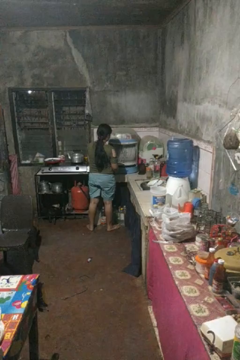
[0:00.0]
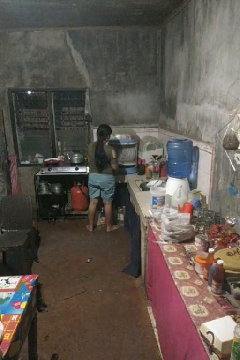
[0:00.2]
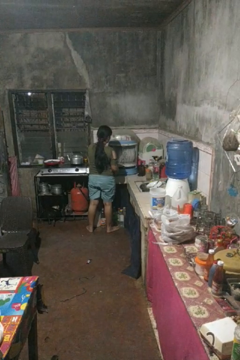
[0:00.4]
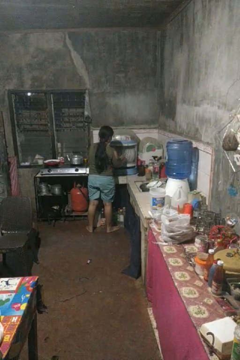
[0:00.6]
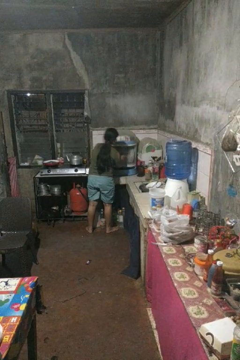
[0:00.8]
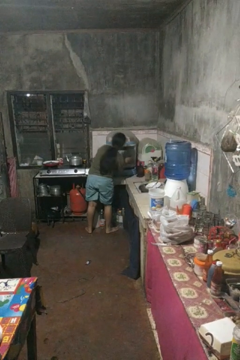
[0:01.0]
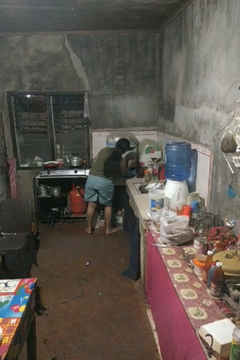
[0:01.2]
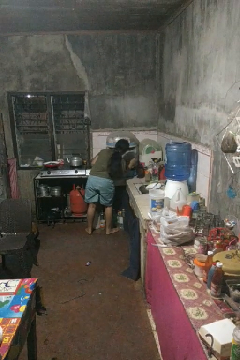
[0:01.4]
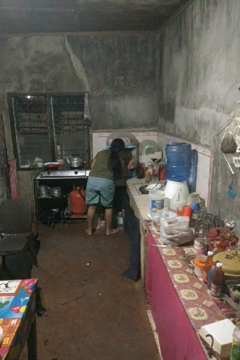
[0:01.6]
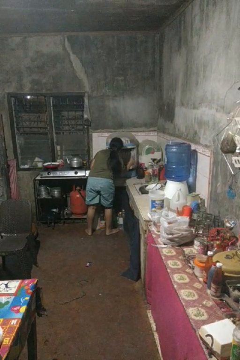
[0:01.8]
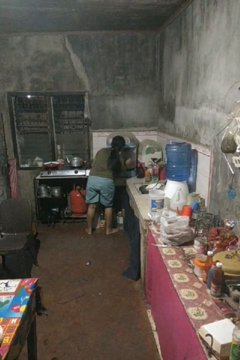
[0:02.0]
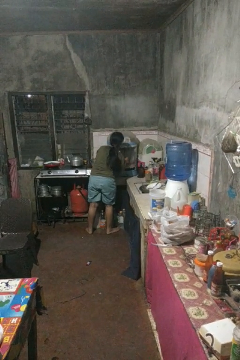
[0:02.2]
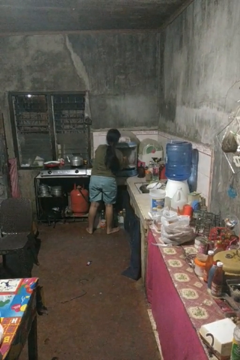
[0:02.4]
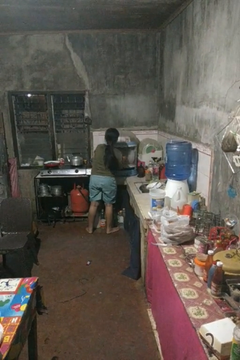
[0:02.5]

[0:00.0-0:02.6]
person searches in kitchen drawer

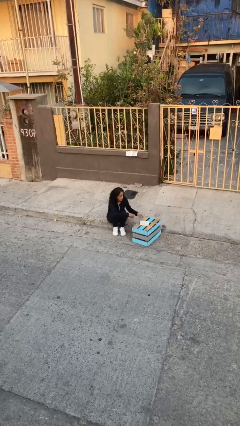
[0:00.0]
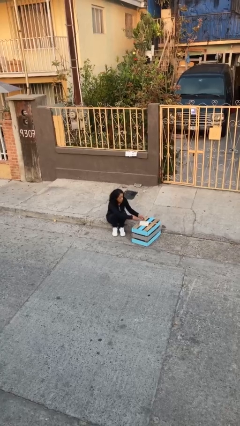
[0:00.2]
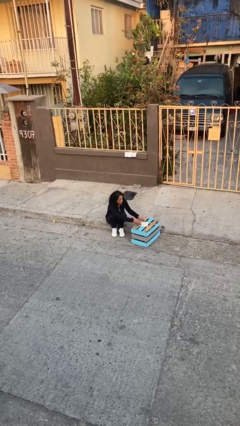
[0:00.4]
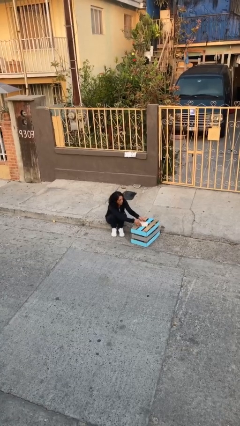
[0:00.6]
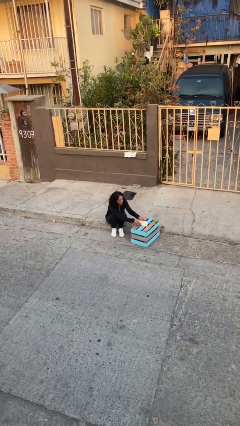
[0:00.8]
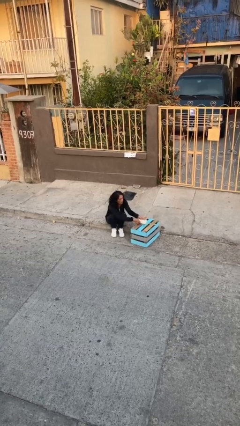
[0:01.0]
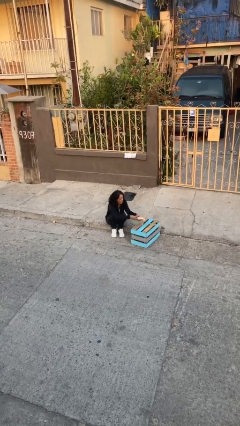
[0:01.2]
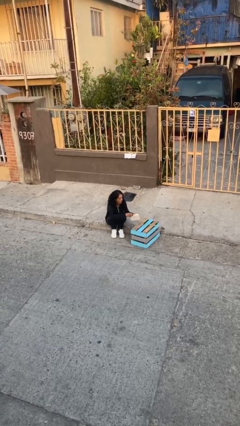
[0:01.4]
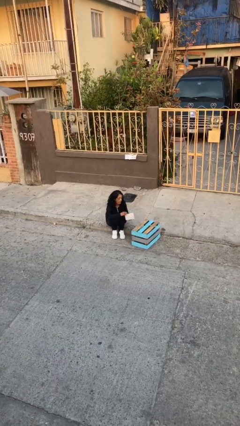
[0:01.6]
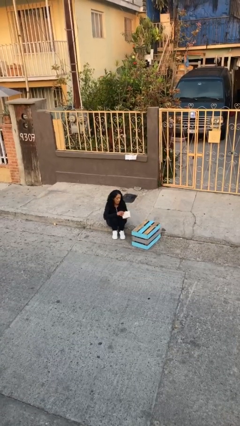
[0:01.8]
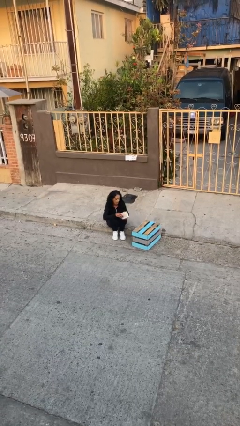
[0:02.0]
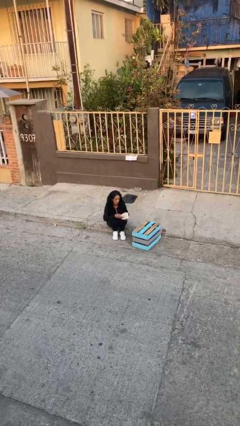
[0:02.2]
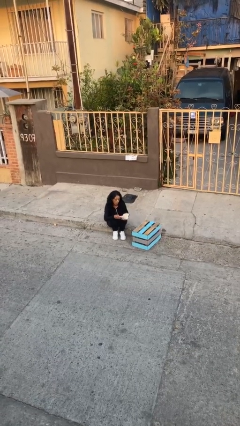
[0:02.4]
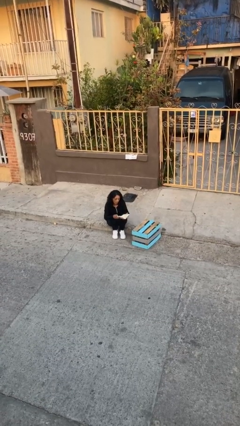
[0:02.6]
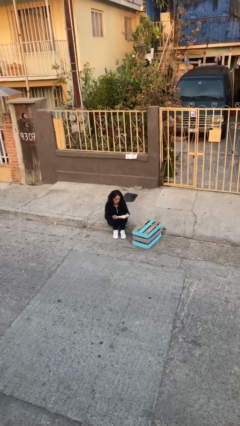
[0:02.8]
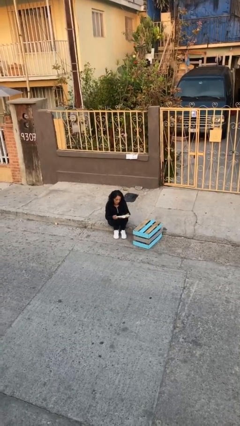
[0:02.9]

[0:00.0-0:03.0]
person picks up object from table

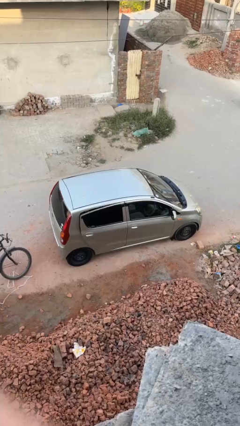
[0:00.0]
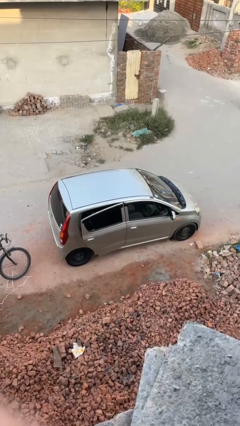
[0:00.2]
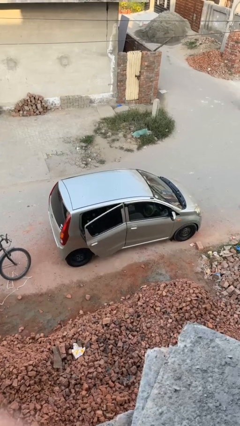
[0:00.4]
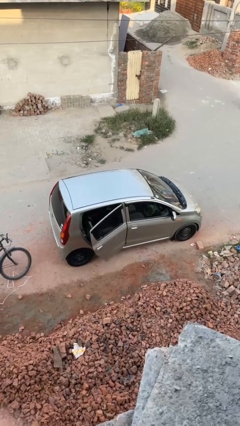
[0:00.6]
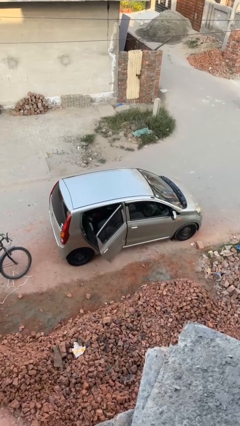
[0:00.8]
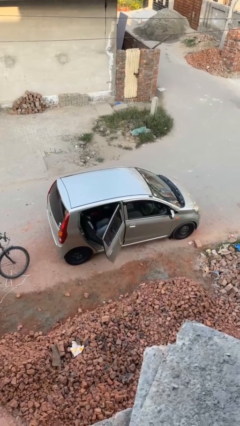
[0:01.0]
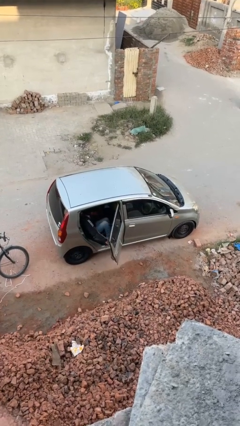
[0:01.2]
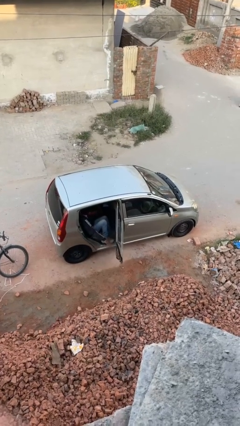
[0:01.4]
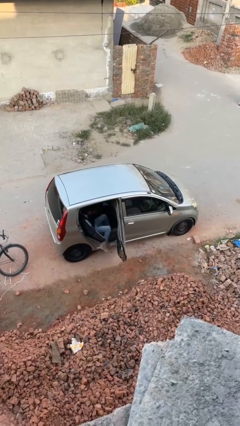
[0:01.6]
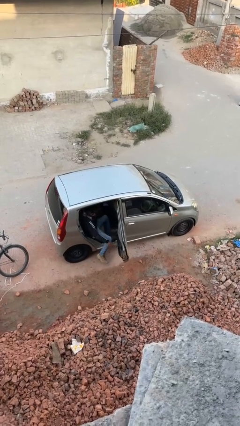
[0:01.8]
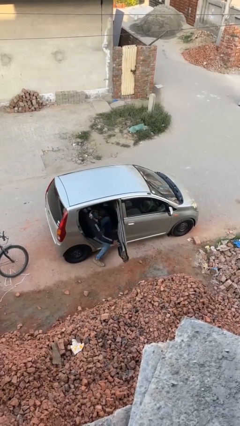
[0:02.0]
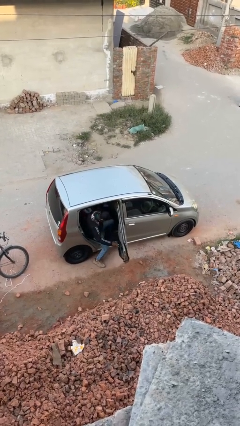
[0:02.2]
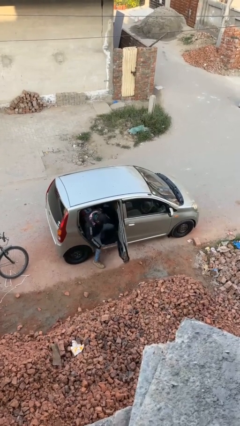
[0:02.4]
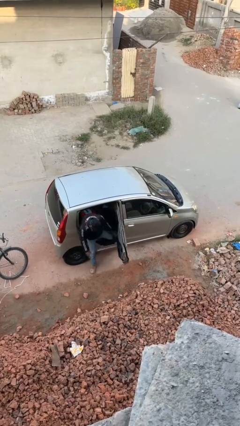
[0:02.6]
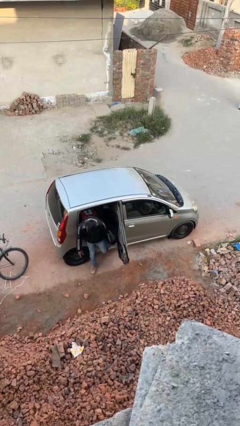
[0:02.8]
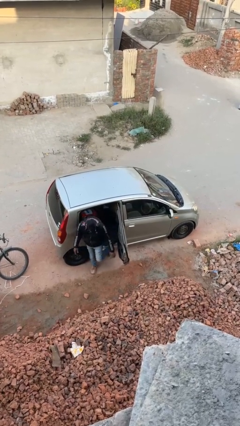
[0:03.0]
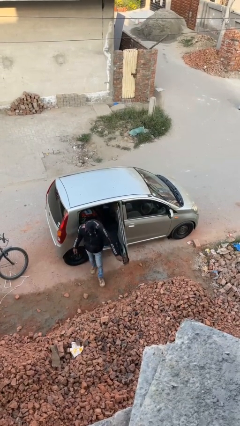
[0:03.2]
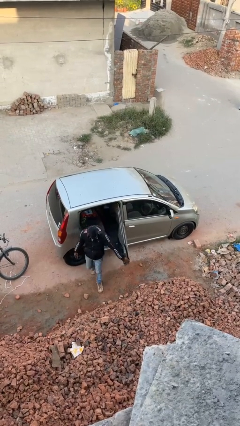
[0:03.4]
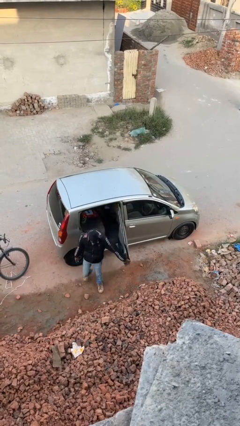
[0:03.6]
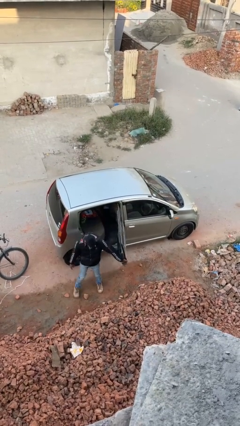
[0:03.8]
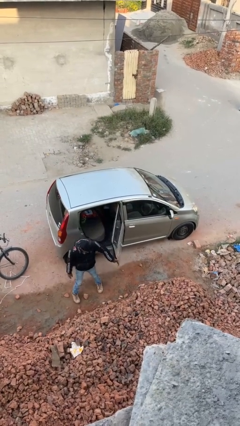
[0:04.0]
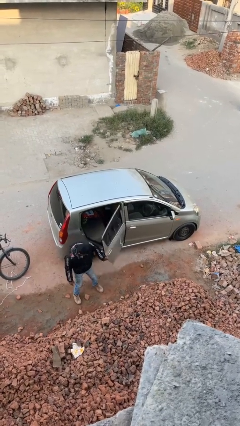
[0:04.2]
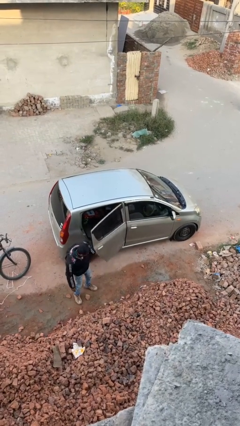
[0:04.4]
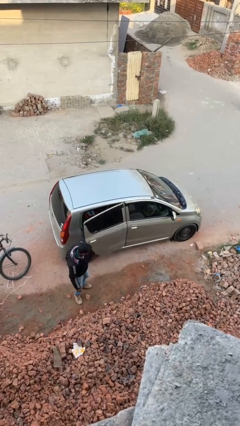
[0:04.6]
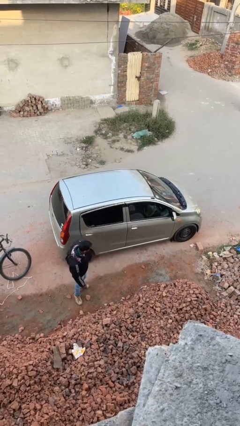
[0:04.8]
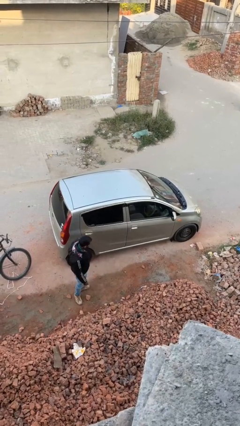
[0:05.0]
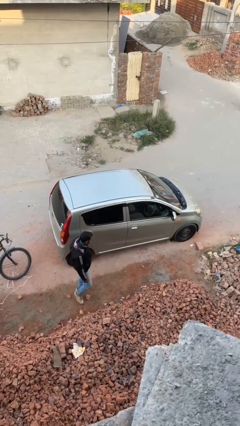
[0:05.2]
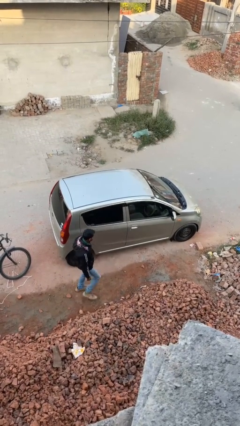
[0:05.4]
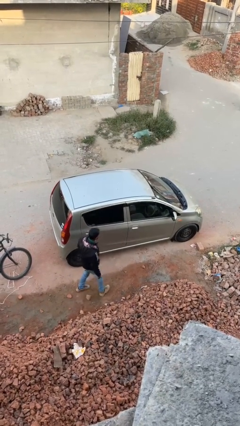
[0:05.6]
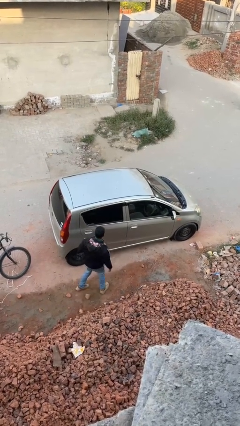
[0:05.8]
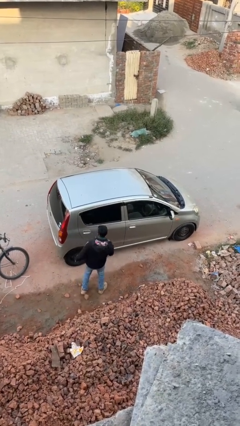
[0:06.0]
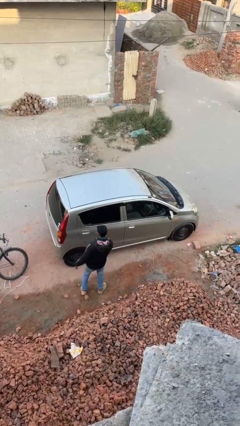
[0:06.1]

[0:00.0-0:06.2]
car drops off person

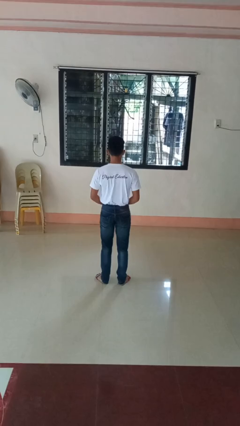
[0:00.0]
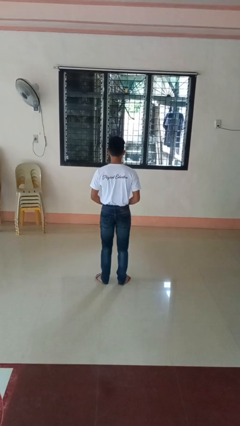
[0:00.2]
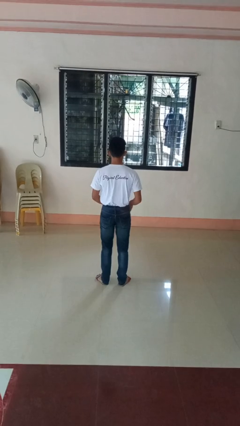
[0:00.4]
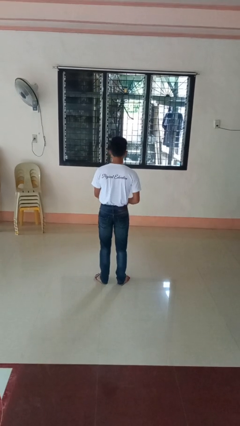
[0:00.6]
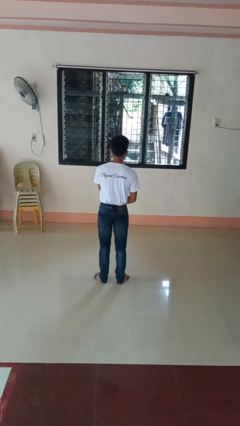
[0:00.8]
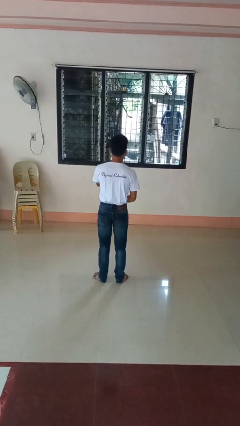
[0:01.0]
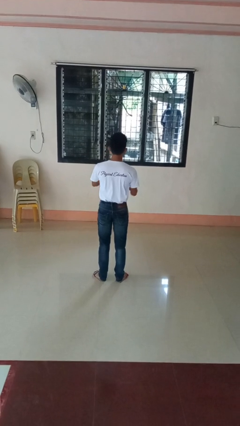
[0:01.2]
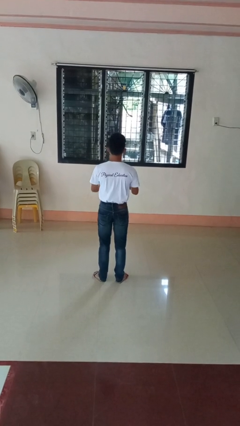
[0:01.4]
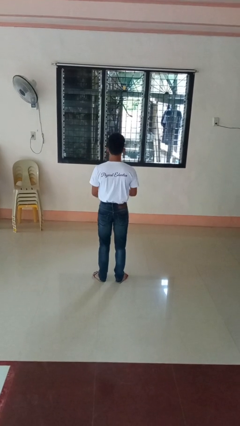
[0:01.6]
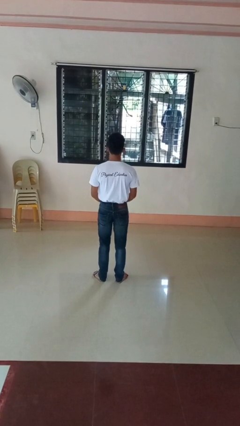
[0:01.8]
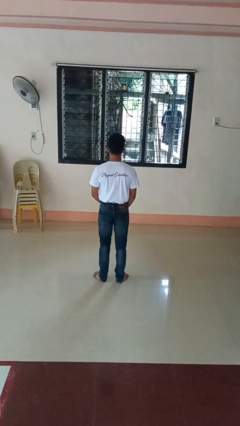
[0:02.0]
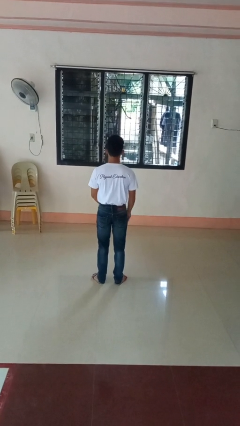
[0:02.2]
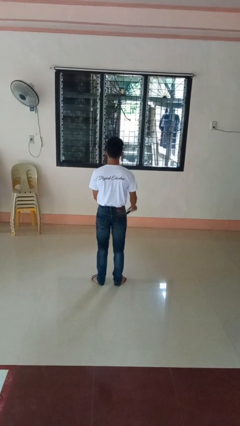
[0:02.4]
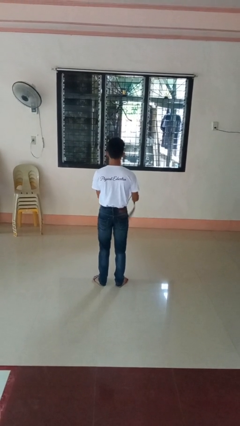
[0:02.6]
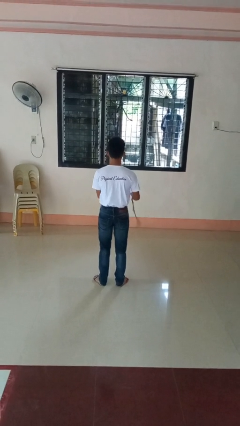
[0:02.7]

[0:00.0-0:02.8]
person takes off belt

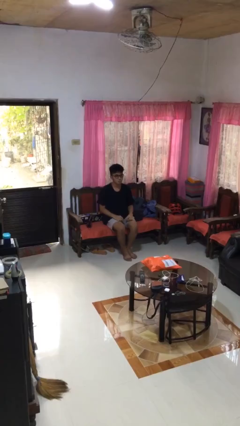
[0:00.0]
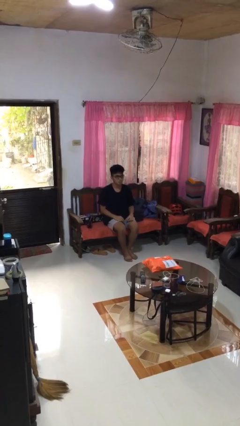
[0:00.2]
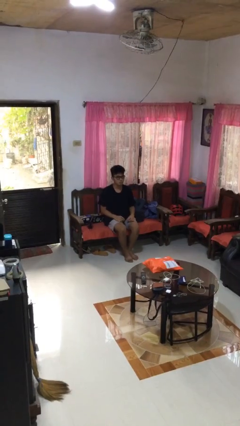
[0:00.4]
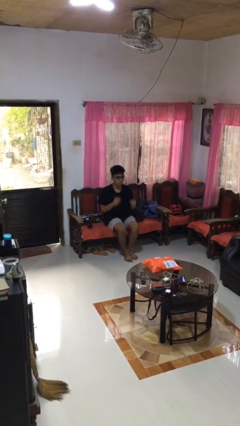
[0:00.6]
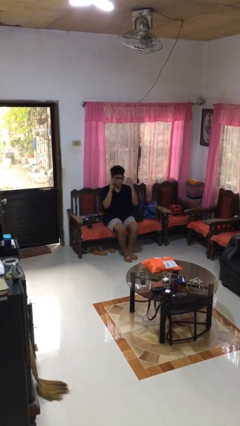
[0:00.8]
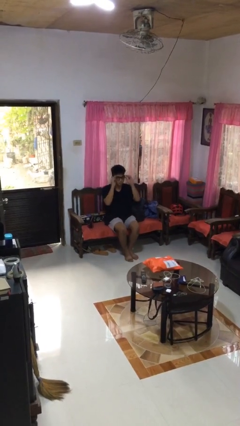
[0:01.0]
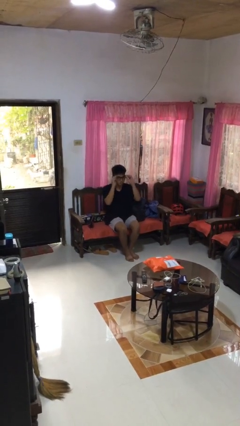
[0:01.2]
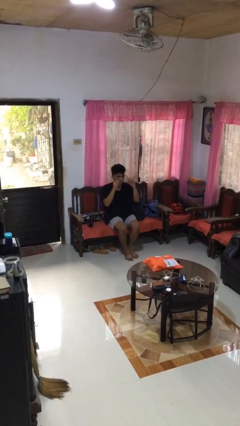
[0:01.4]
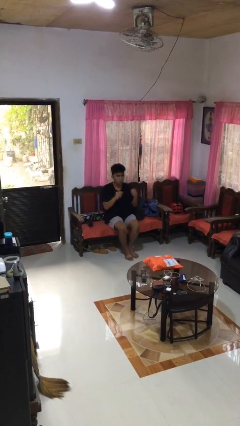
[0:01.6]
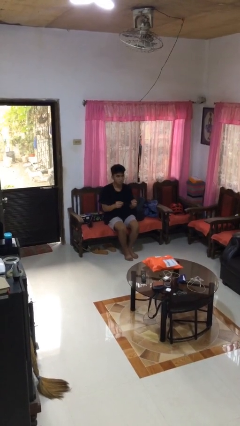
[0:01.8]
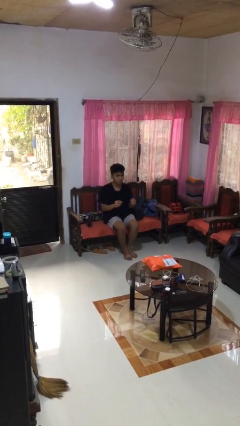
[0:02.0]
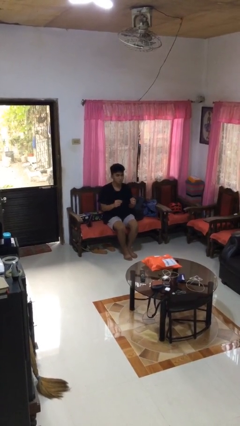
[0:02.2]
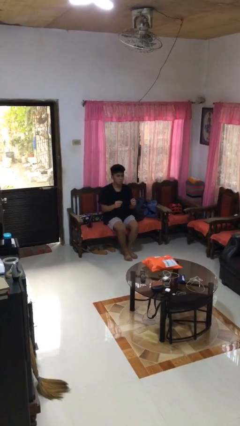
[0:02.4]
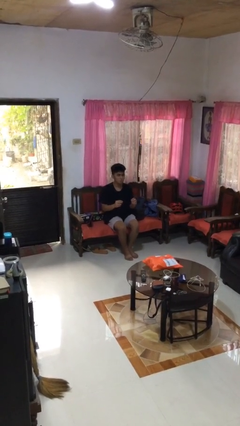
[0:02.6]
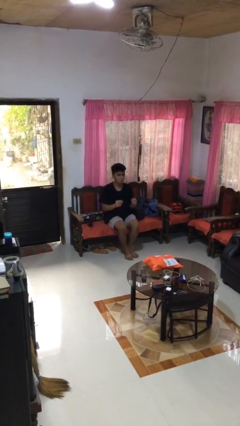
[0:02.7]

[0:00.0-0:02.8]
person takes off glasses

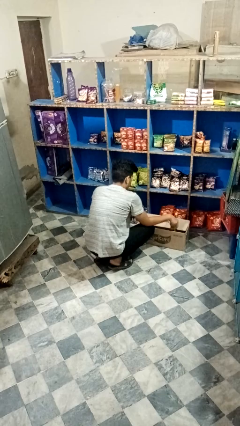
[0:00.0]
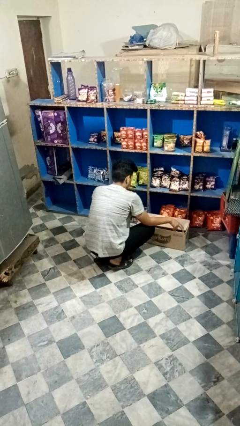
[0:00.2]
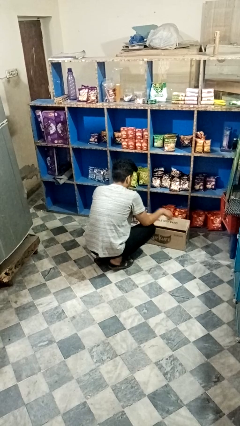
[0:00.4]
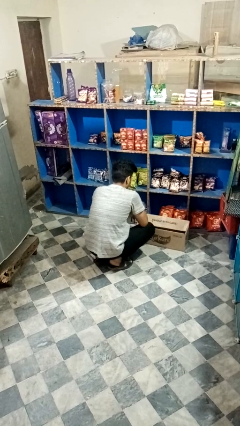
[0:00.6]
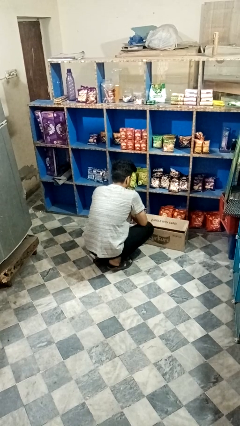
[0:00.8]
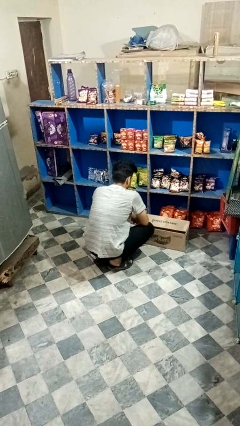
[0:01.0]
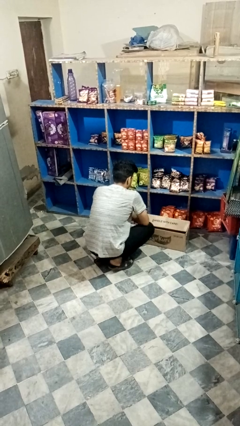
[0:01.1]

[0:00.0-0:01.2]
person puts object into box
